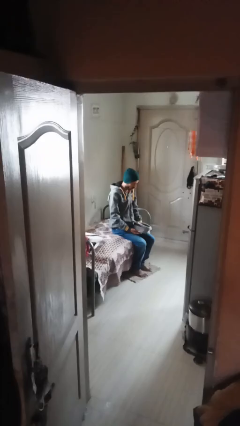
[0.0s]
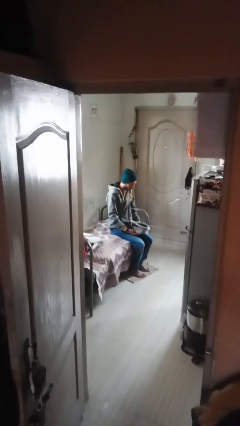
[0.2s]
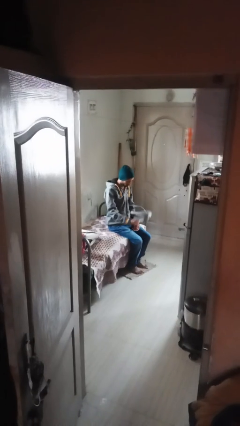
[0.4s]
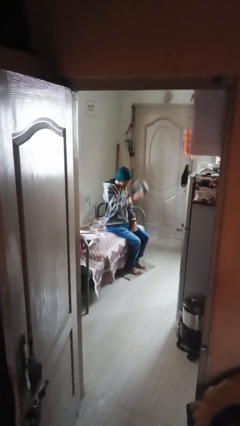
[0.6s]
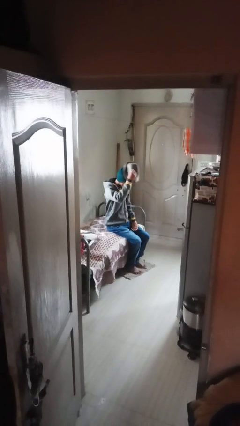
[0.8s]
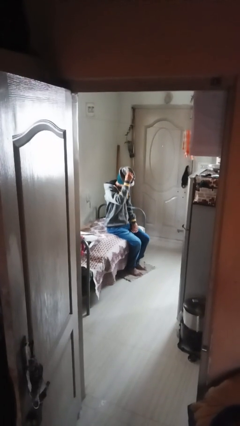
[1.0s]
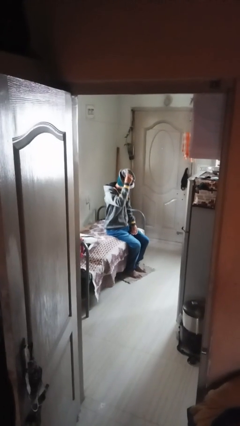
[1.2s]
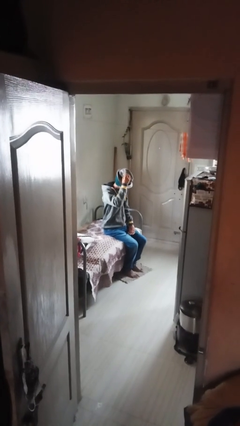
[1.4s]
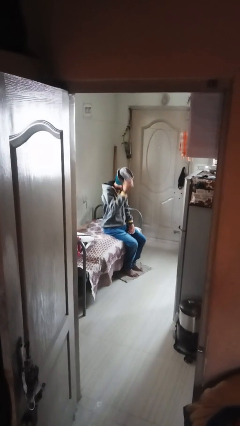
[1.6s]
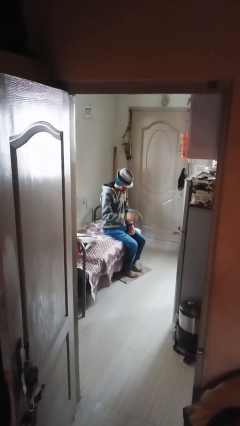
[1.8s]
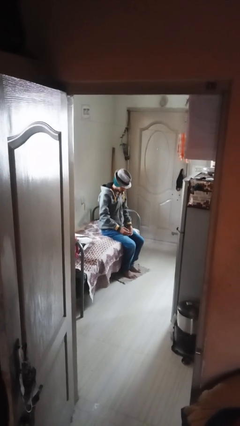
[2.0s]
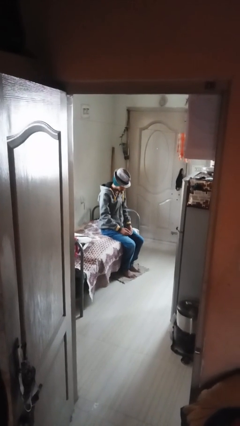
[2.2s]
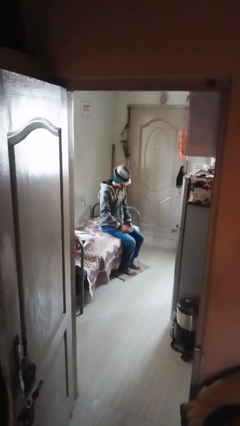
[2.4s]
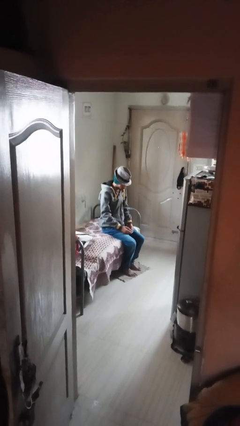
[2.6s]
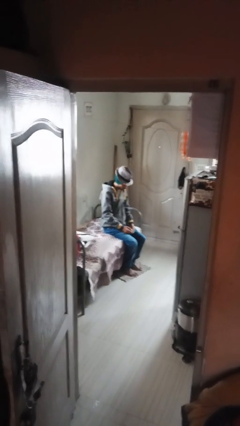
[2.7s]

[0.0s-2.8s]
person puts on hat

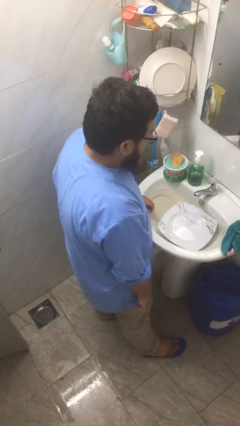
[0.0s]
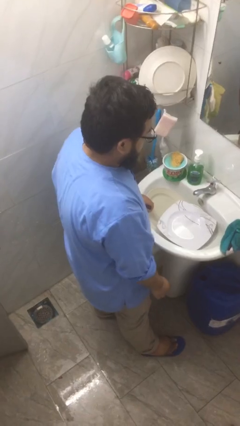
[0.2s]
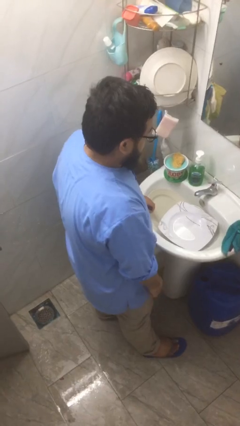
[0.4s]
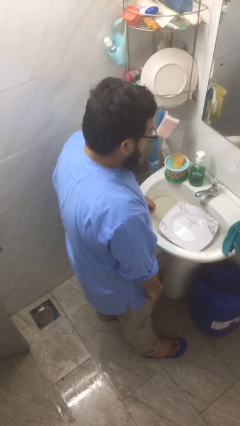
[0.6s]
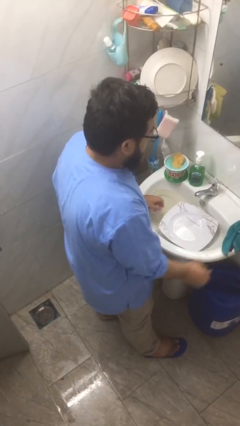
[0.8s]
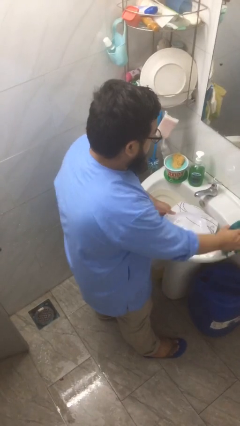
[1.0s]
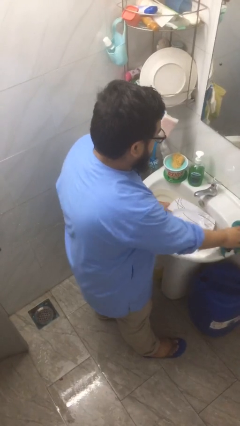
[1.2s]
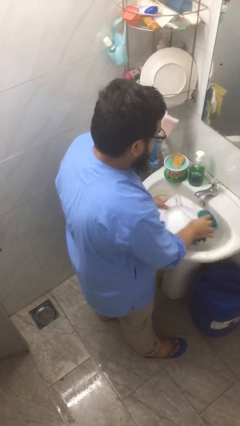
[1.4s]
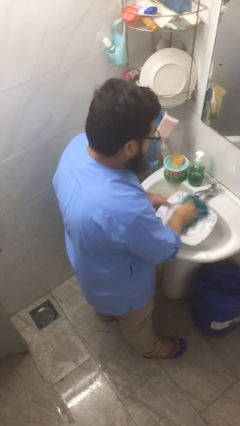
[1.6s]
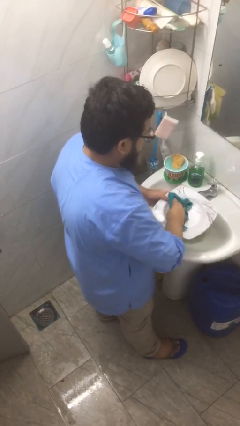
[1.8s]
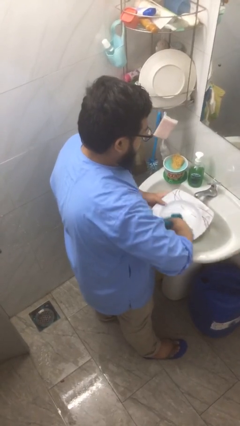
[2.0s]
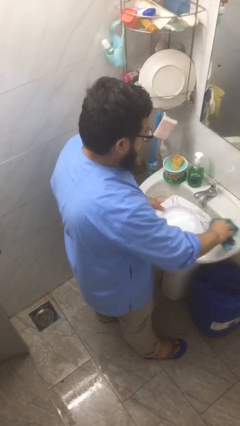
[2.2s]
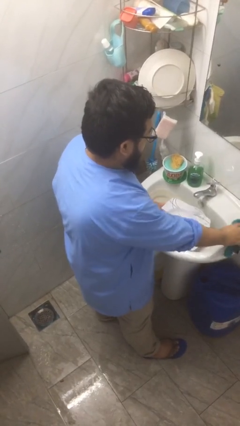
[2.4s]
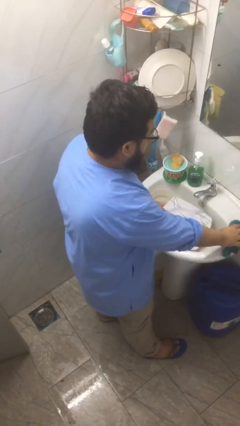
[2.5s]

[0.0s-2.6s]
person dries dish

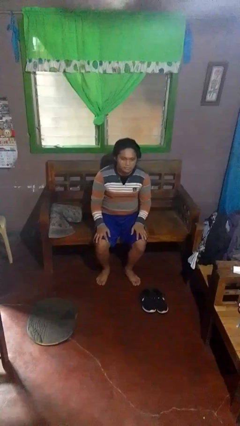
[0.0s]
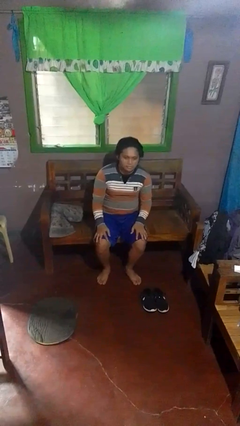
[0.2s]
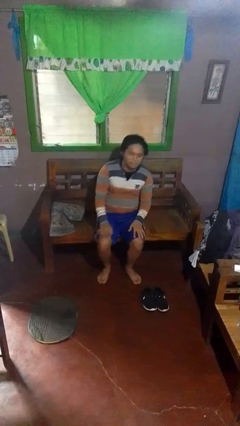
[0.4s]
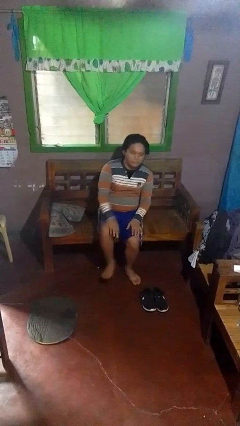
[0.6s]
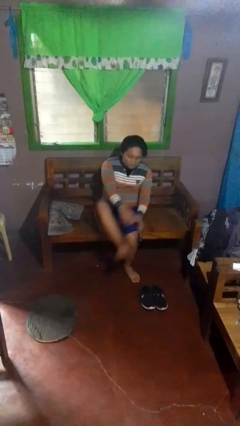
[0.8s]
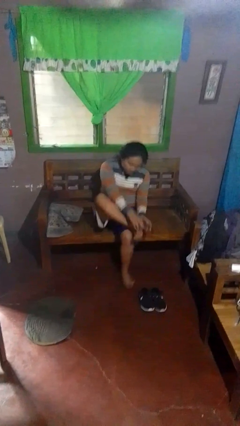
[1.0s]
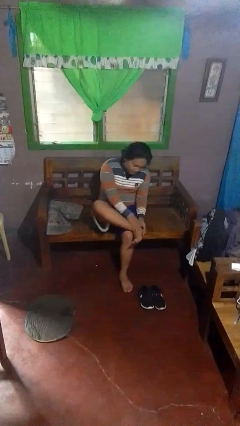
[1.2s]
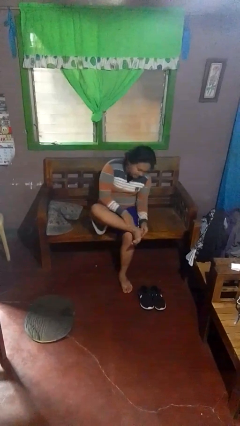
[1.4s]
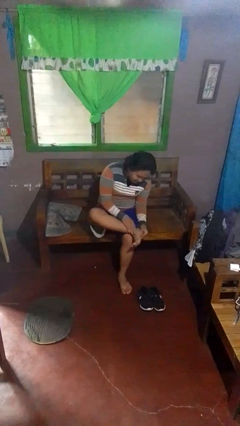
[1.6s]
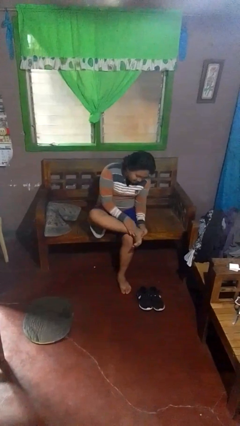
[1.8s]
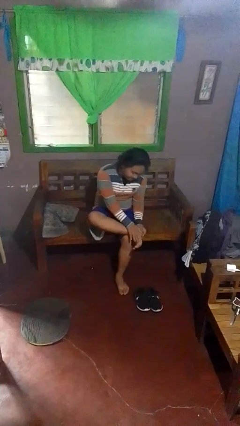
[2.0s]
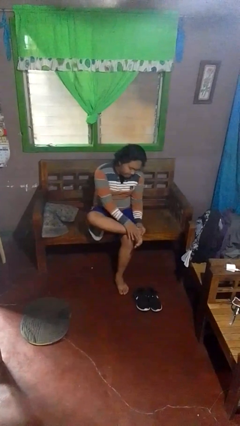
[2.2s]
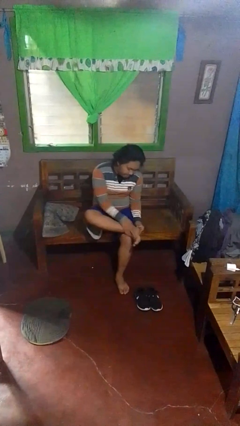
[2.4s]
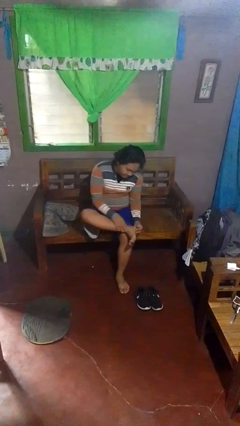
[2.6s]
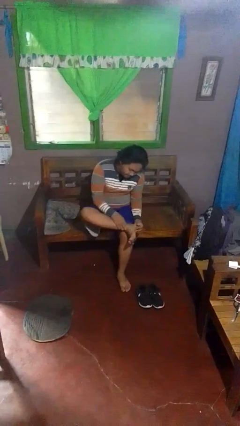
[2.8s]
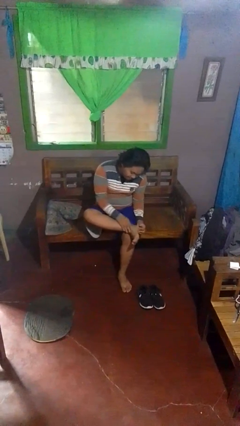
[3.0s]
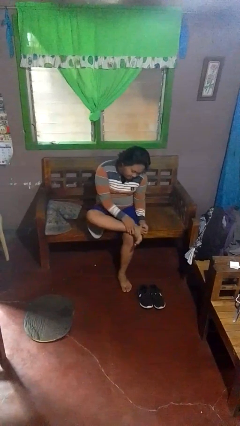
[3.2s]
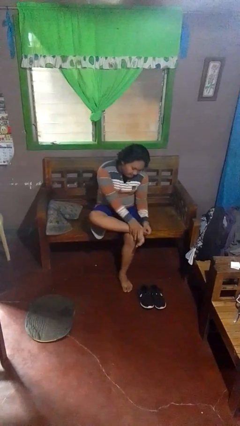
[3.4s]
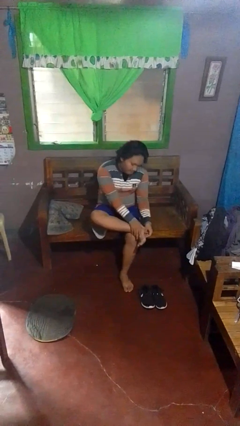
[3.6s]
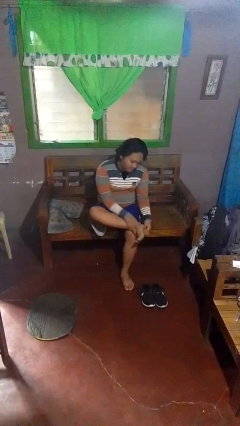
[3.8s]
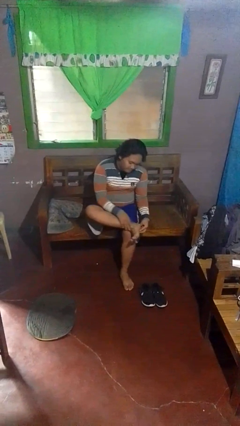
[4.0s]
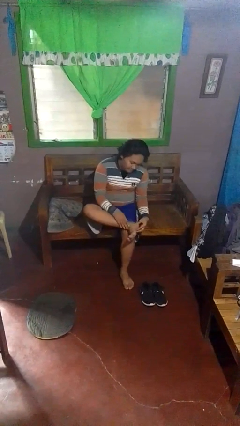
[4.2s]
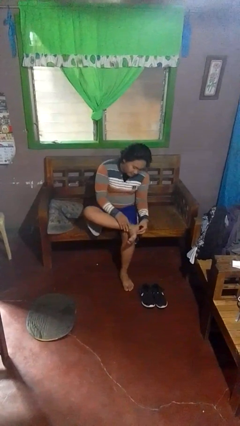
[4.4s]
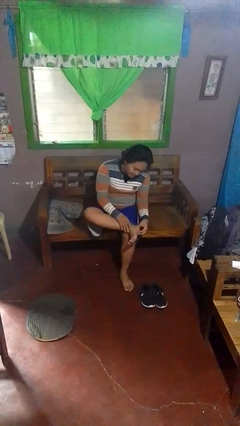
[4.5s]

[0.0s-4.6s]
person rubs foot

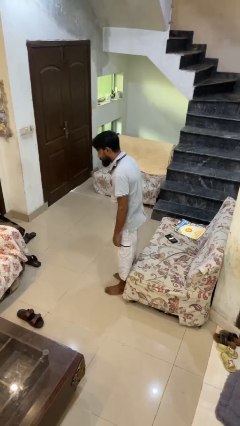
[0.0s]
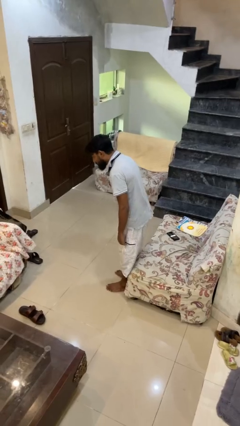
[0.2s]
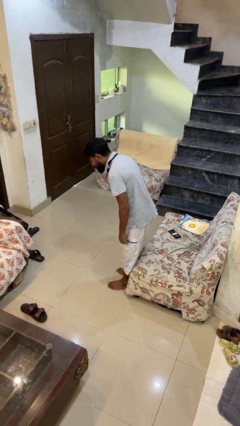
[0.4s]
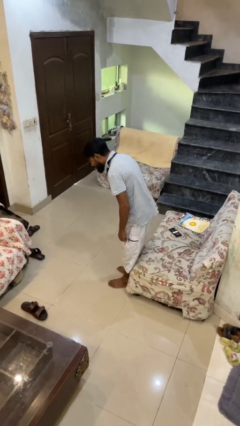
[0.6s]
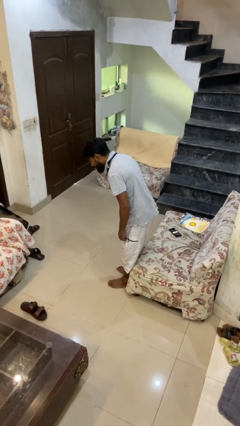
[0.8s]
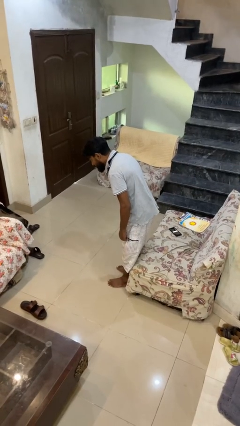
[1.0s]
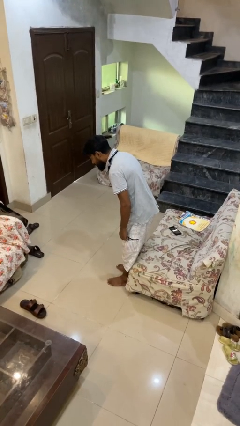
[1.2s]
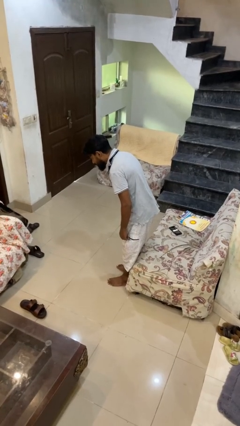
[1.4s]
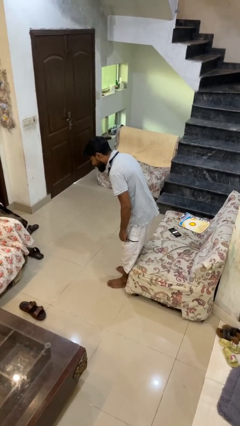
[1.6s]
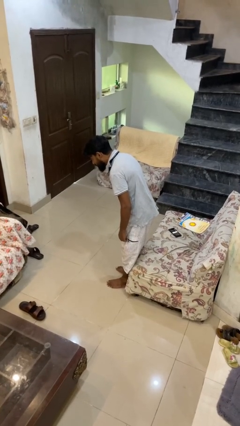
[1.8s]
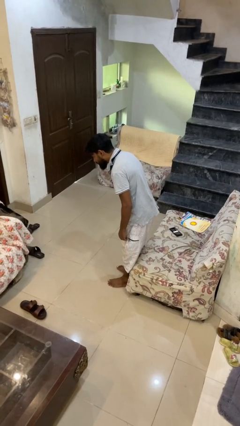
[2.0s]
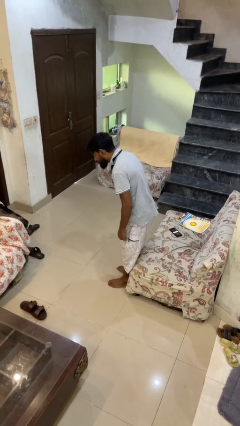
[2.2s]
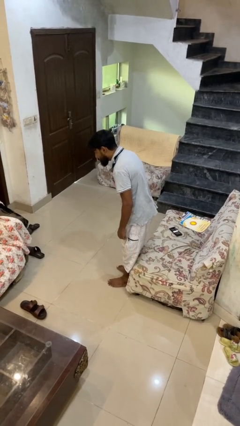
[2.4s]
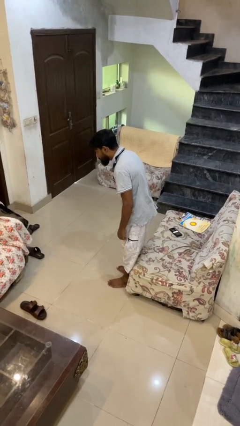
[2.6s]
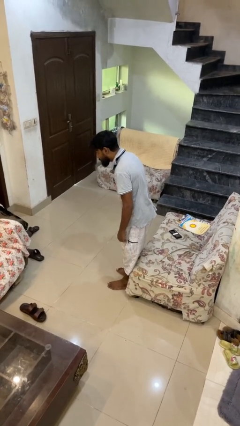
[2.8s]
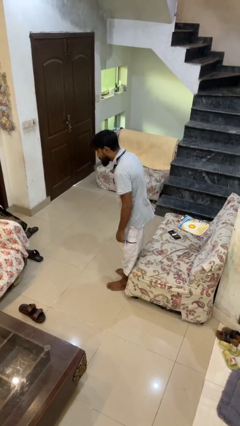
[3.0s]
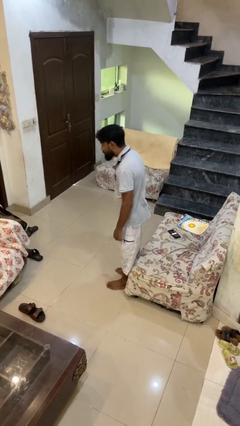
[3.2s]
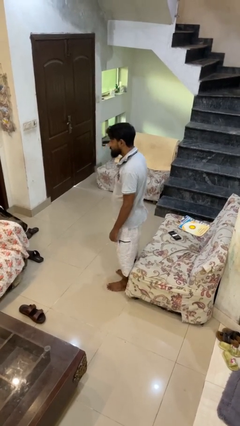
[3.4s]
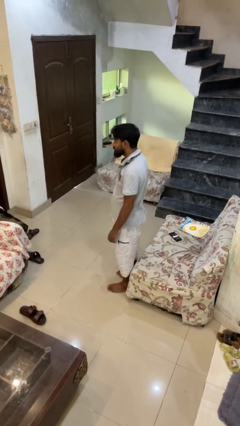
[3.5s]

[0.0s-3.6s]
person bows

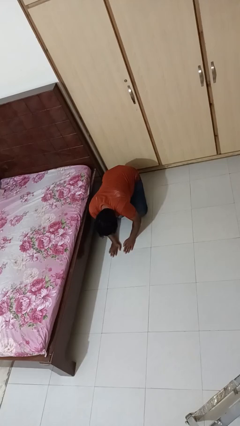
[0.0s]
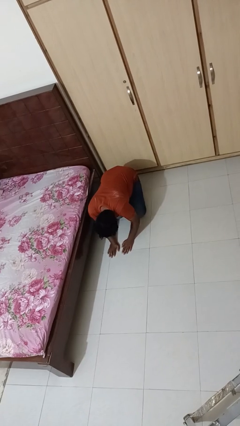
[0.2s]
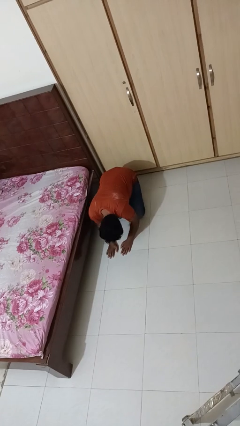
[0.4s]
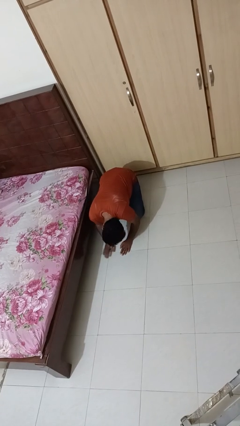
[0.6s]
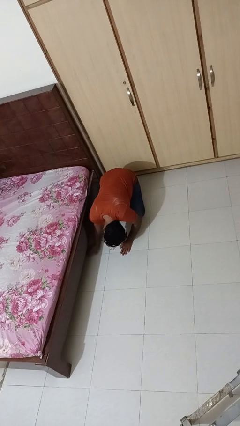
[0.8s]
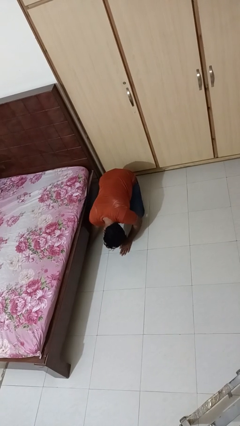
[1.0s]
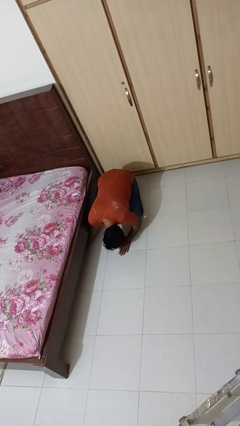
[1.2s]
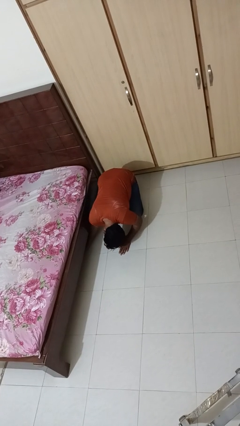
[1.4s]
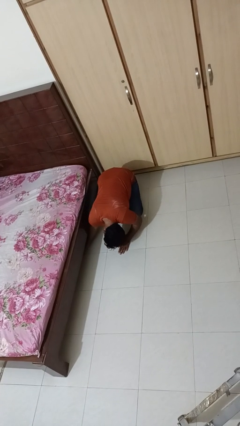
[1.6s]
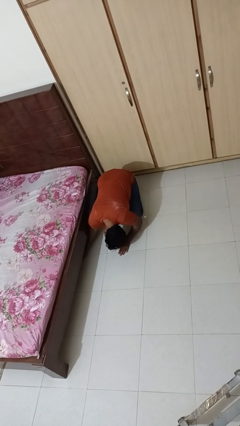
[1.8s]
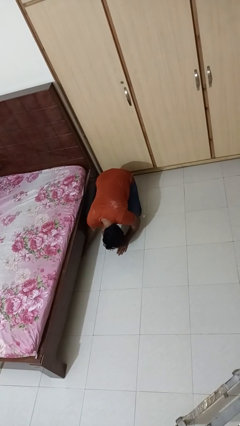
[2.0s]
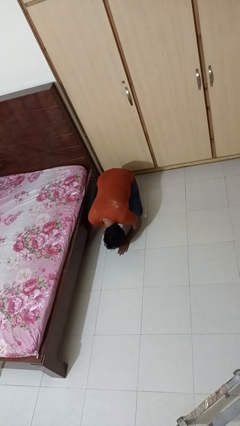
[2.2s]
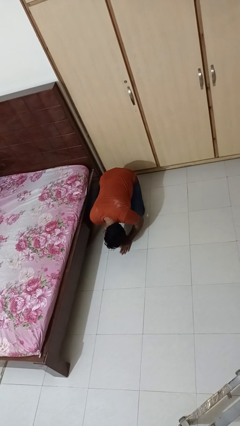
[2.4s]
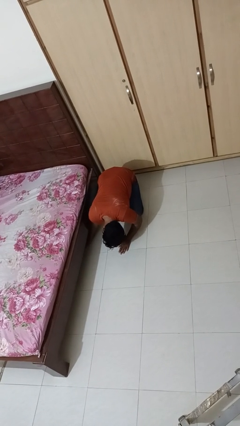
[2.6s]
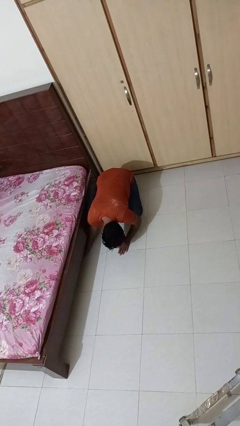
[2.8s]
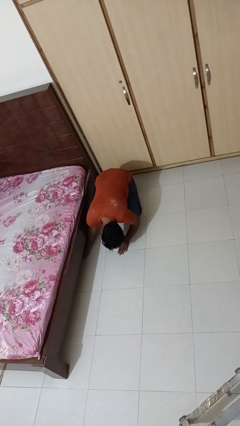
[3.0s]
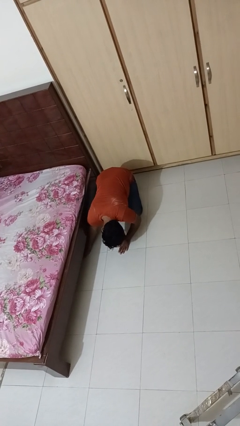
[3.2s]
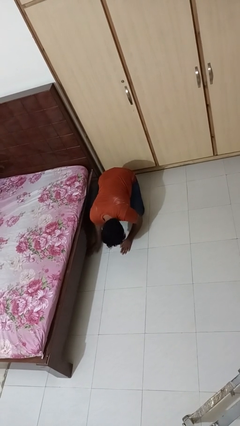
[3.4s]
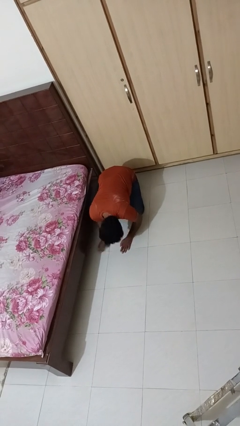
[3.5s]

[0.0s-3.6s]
person searches under bed

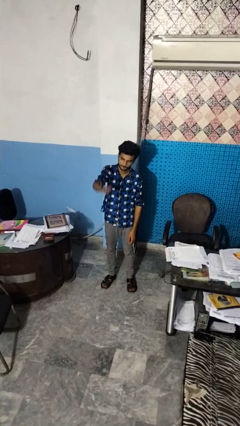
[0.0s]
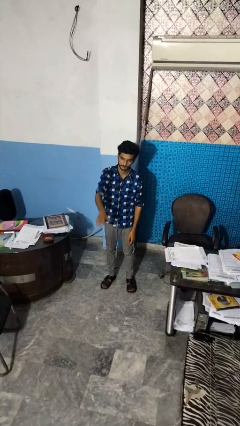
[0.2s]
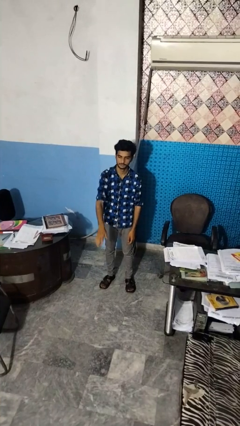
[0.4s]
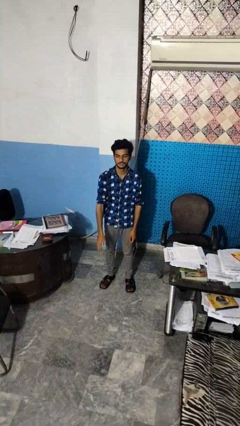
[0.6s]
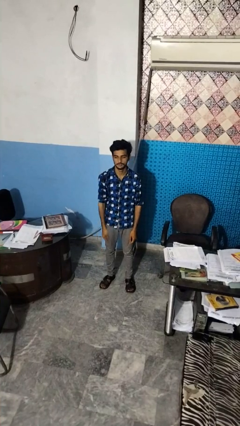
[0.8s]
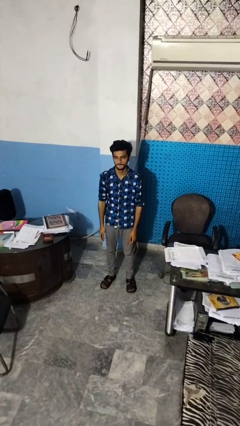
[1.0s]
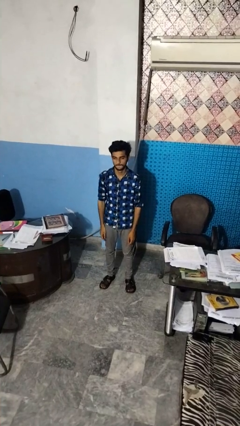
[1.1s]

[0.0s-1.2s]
person gestures swipe down
